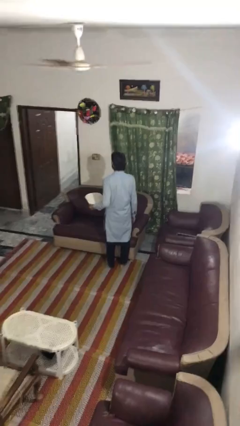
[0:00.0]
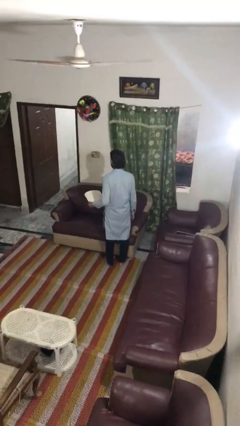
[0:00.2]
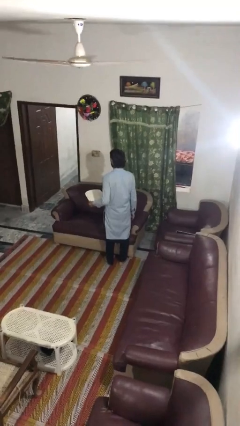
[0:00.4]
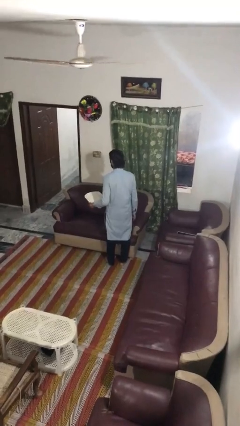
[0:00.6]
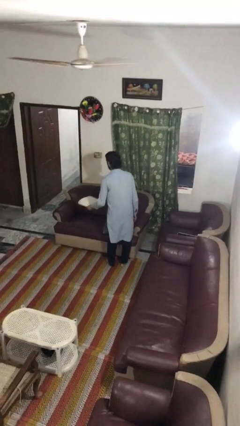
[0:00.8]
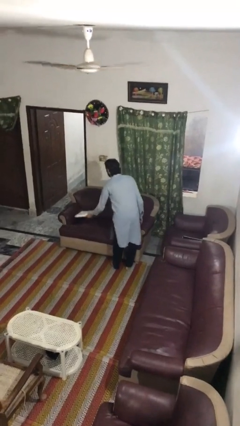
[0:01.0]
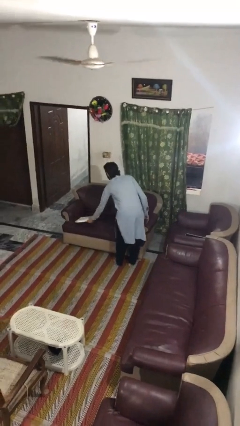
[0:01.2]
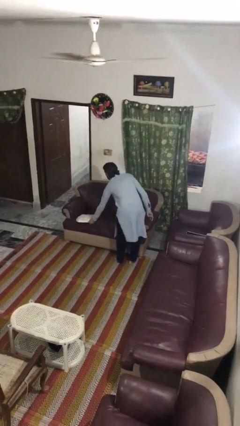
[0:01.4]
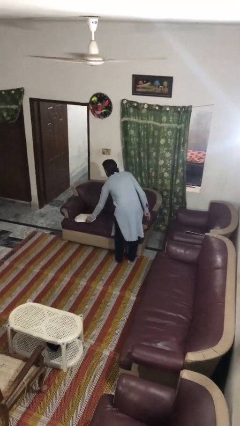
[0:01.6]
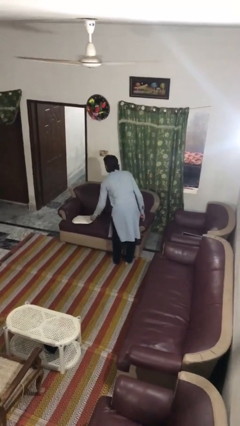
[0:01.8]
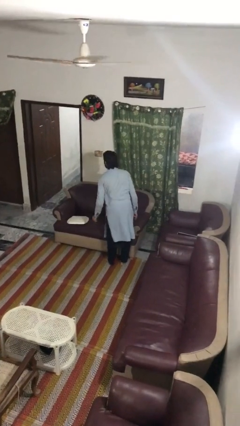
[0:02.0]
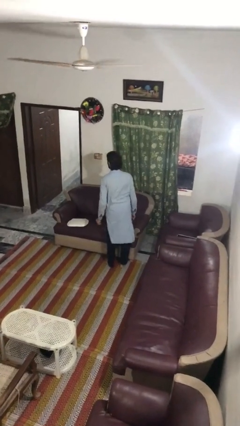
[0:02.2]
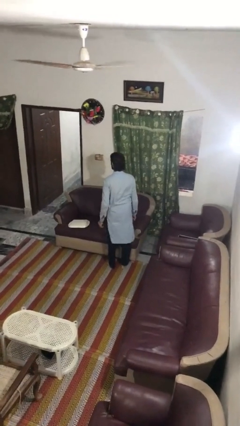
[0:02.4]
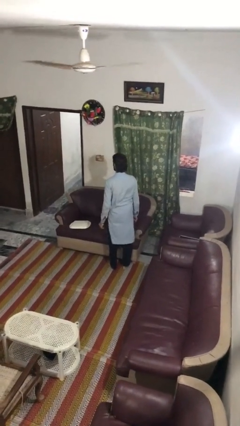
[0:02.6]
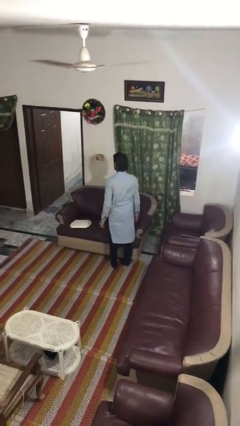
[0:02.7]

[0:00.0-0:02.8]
person puts down object on couch

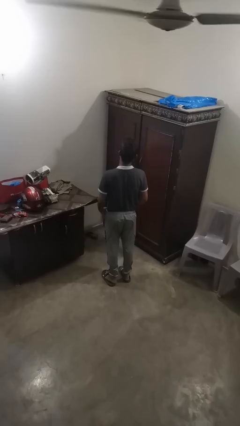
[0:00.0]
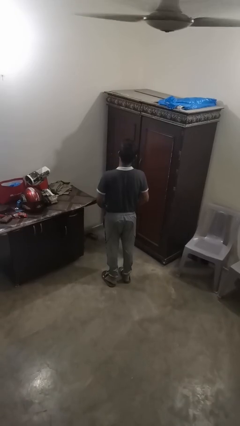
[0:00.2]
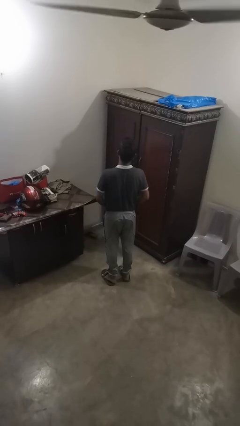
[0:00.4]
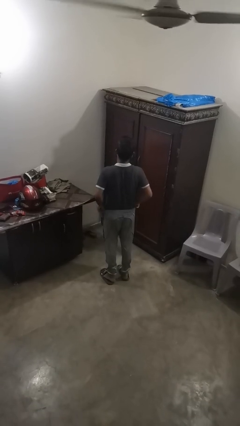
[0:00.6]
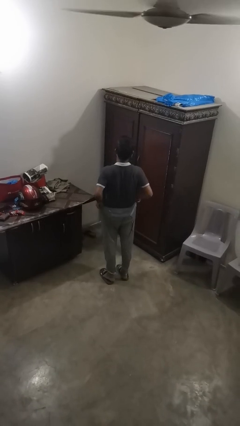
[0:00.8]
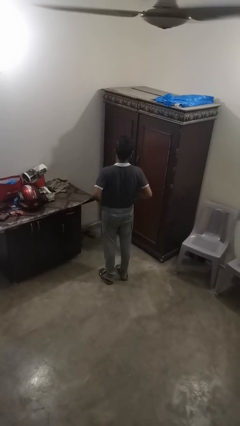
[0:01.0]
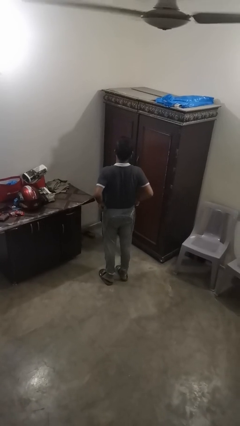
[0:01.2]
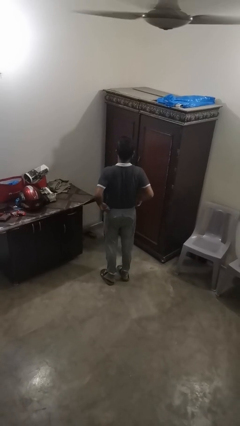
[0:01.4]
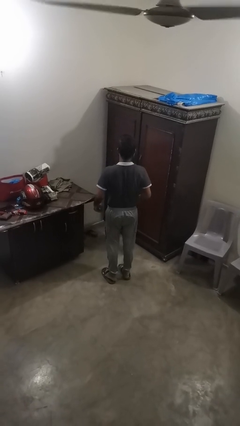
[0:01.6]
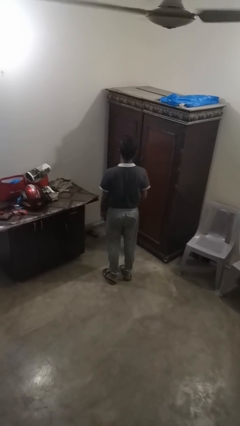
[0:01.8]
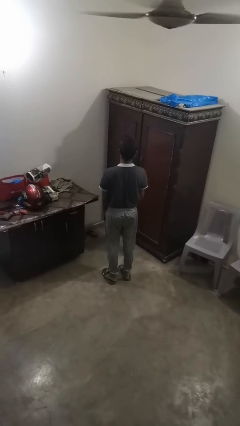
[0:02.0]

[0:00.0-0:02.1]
person hikes up pants

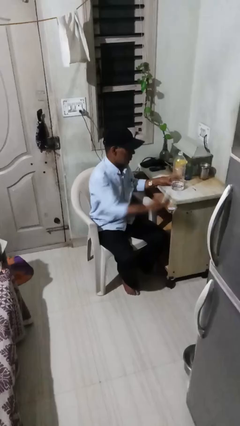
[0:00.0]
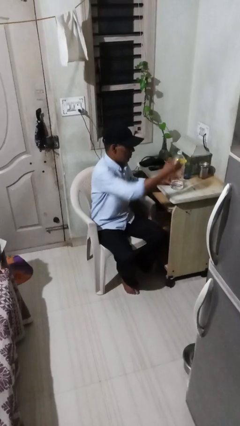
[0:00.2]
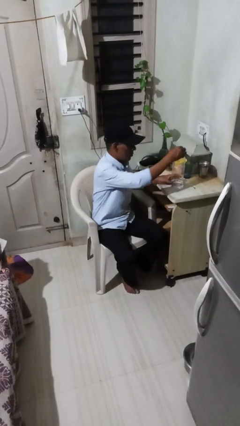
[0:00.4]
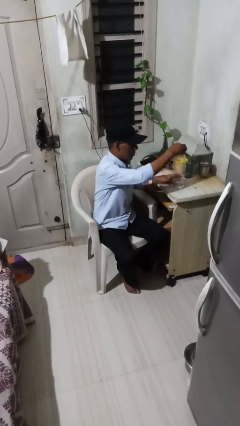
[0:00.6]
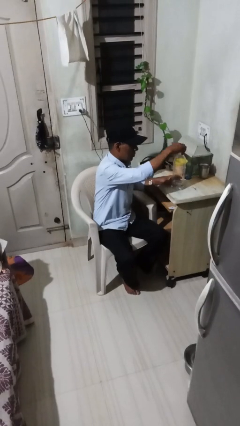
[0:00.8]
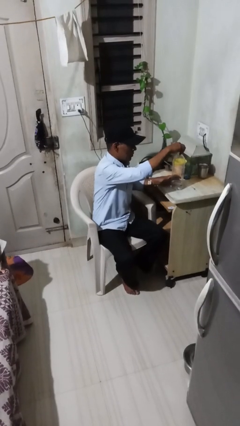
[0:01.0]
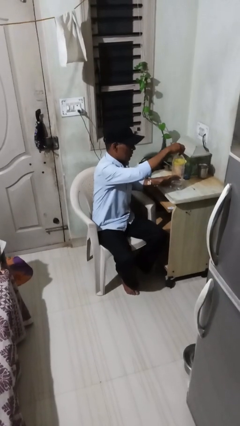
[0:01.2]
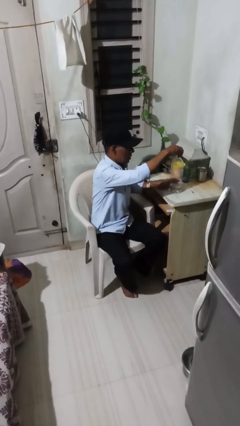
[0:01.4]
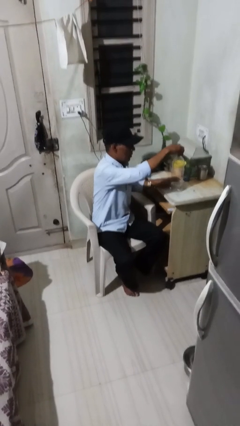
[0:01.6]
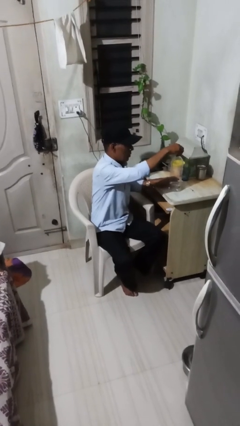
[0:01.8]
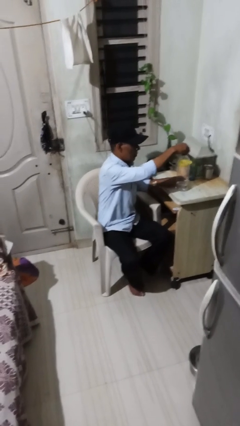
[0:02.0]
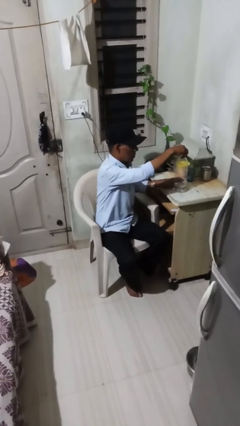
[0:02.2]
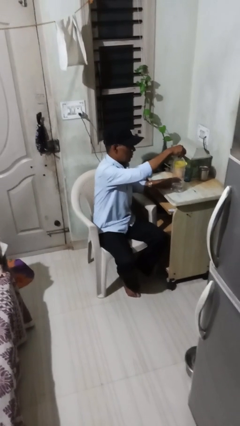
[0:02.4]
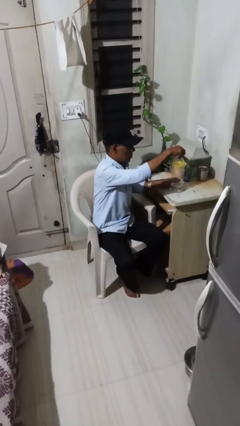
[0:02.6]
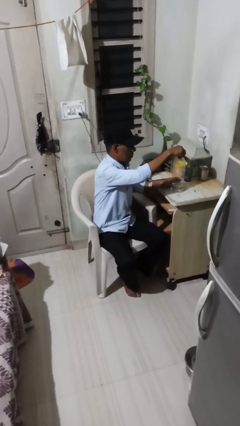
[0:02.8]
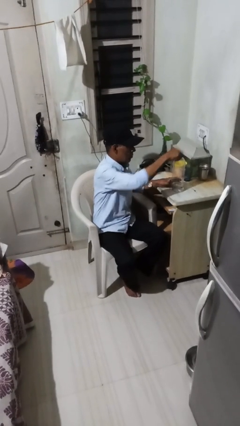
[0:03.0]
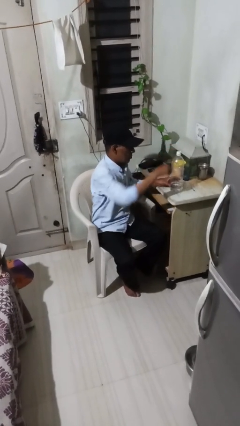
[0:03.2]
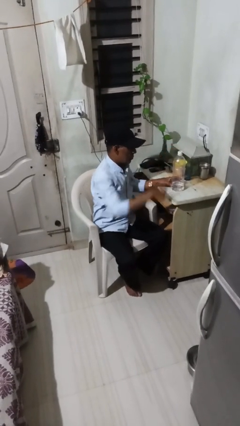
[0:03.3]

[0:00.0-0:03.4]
person screws lid to bottle

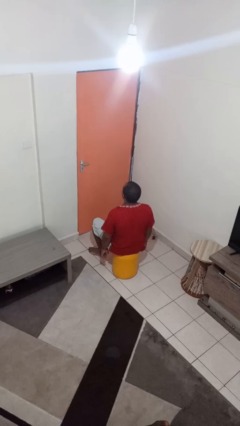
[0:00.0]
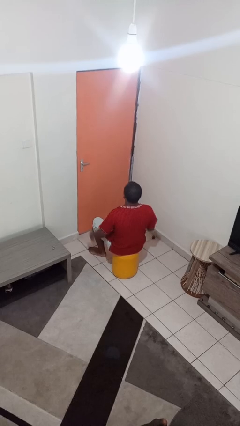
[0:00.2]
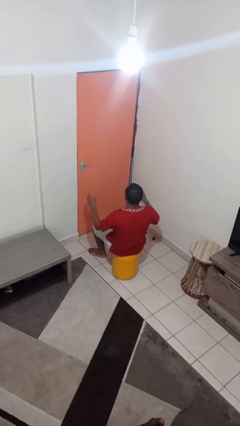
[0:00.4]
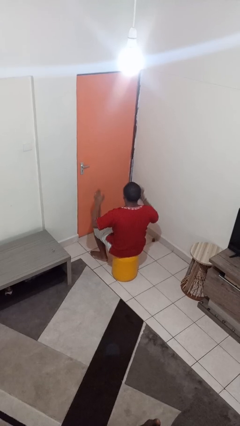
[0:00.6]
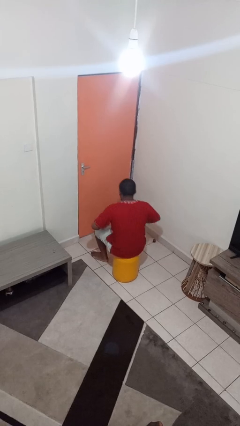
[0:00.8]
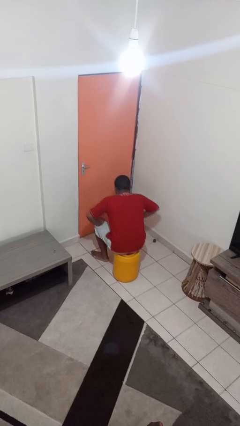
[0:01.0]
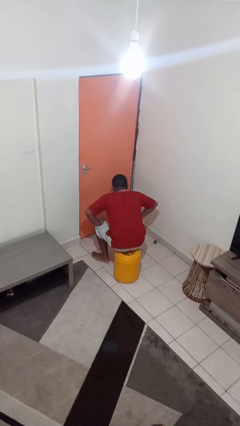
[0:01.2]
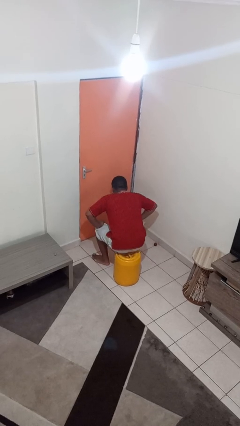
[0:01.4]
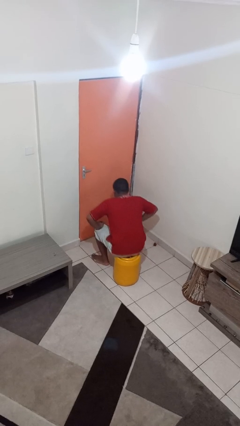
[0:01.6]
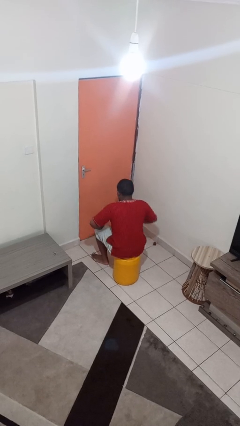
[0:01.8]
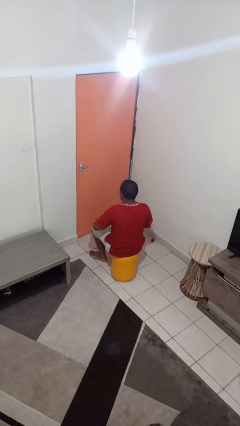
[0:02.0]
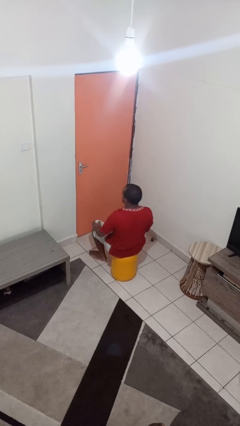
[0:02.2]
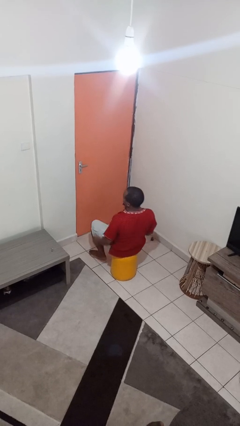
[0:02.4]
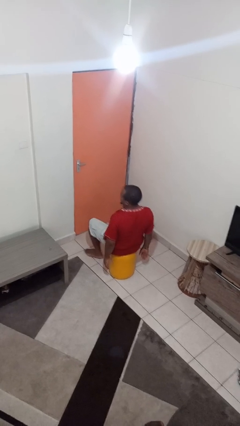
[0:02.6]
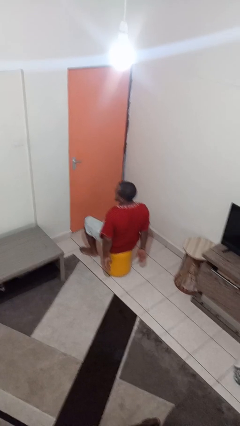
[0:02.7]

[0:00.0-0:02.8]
person slaps hands on thighs

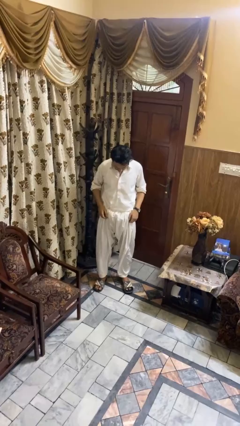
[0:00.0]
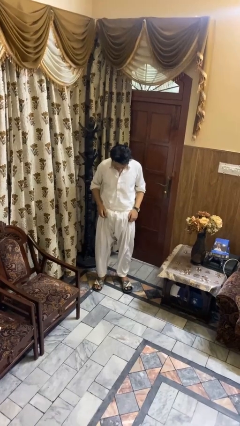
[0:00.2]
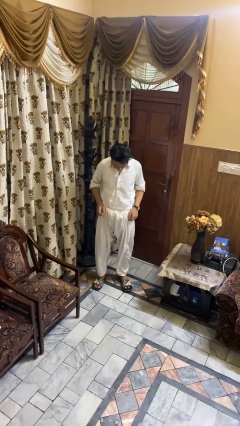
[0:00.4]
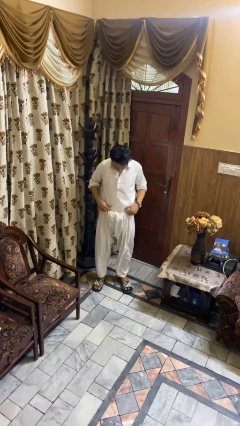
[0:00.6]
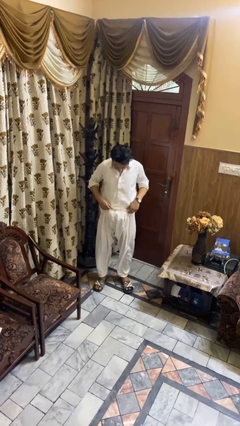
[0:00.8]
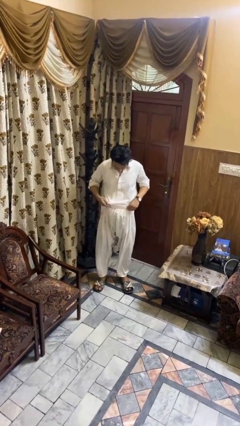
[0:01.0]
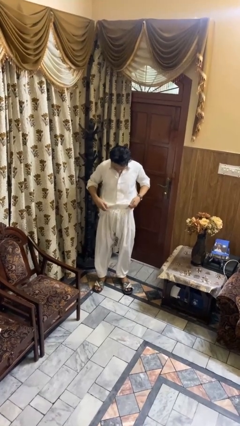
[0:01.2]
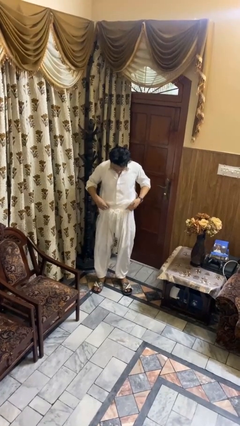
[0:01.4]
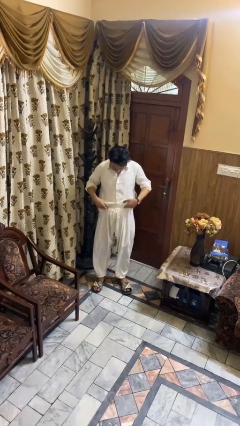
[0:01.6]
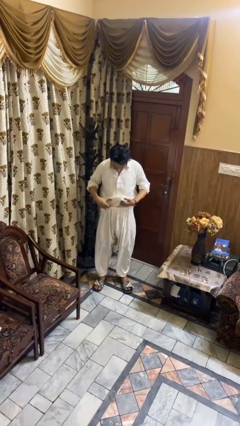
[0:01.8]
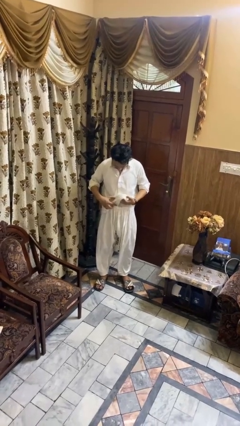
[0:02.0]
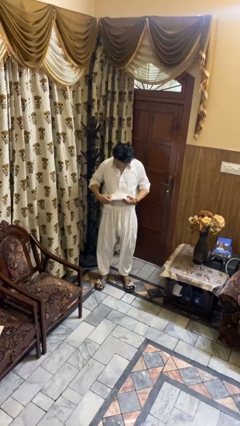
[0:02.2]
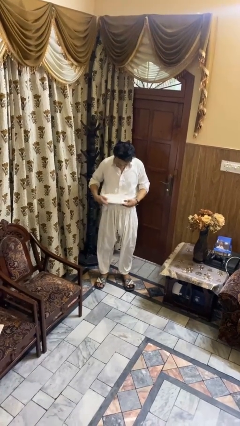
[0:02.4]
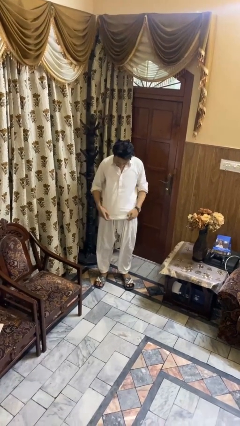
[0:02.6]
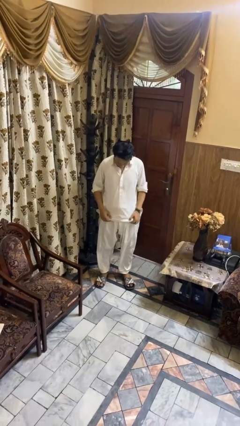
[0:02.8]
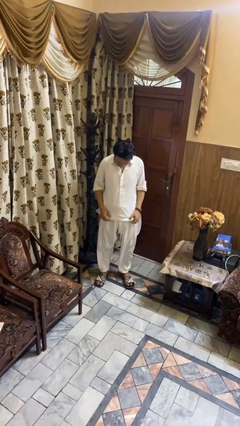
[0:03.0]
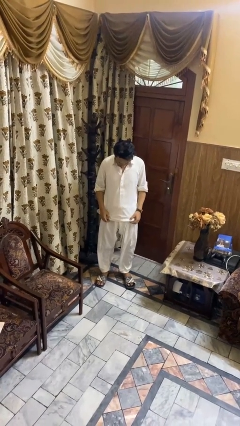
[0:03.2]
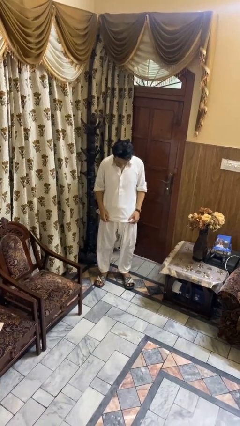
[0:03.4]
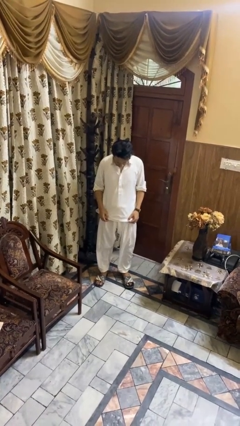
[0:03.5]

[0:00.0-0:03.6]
person untucks shirt

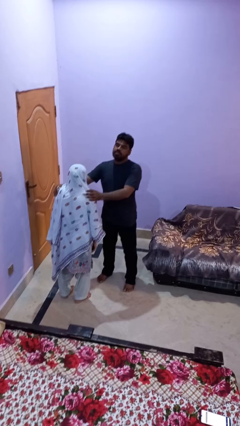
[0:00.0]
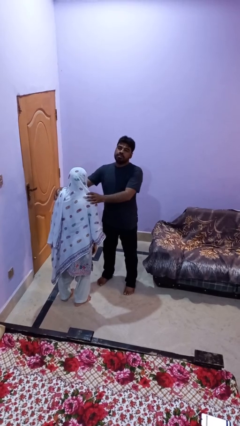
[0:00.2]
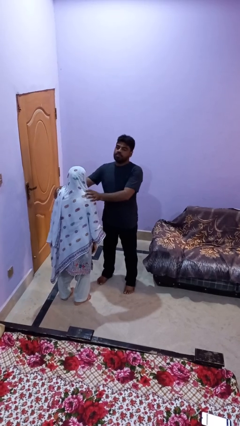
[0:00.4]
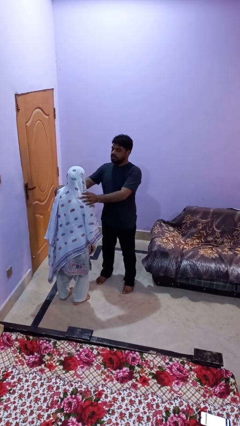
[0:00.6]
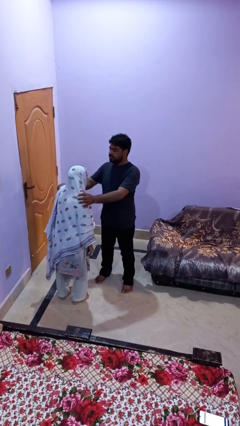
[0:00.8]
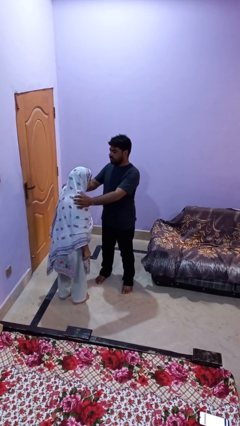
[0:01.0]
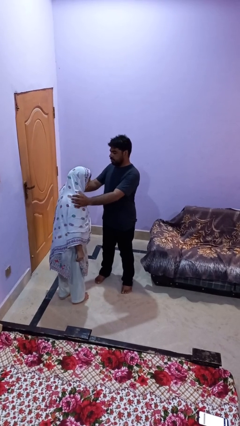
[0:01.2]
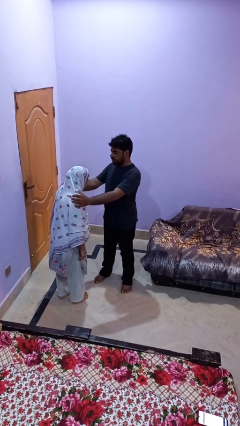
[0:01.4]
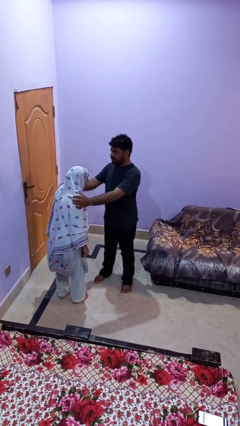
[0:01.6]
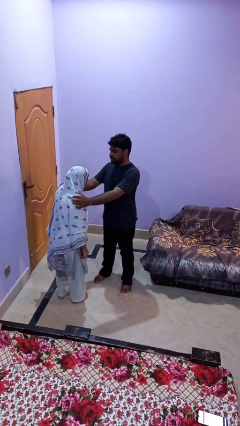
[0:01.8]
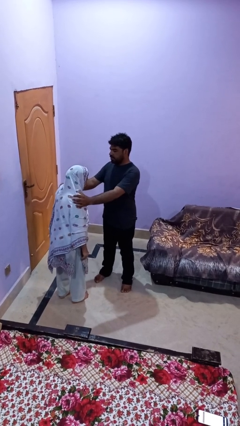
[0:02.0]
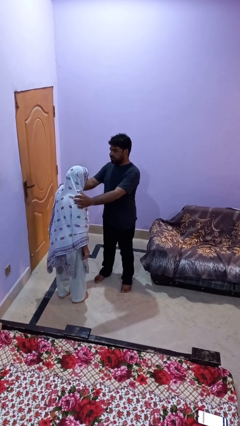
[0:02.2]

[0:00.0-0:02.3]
person spins person around

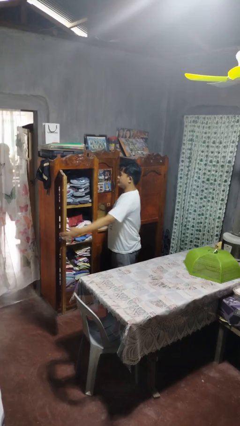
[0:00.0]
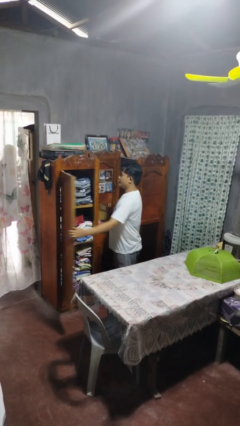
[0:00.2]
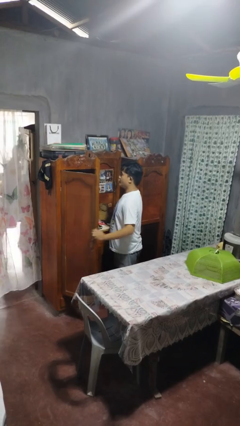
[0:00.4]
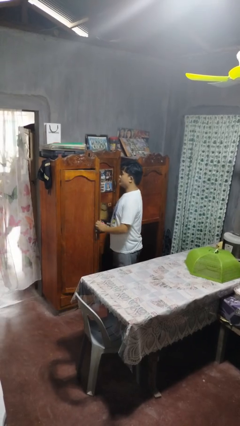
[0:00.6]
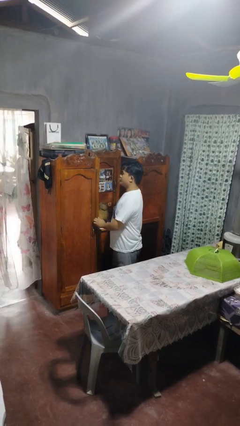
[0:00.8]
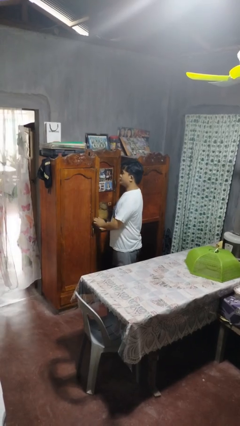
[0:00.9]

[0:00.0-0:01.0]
person closes closet door
